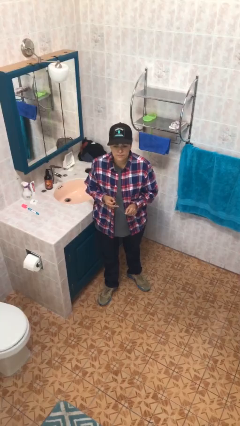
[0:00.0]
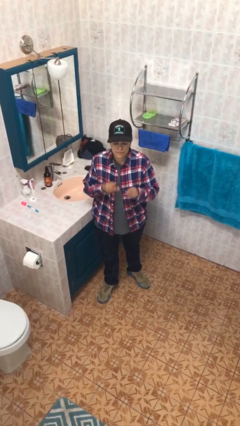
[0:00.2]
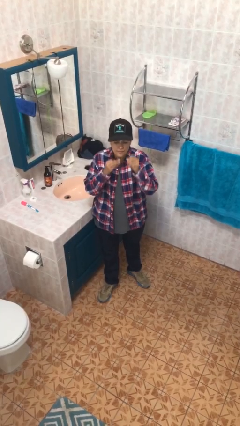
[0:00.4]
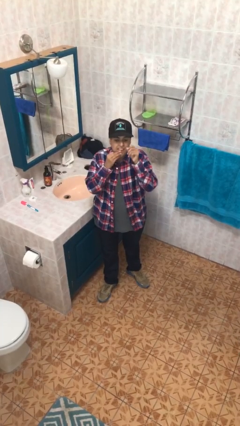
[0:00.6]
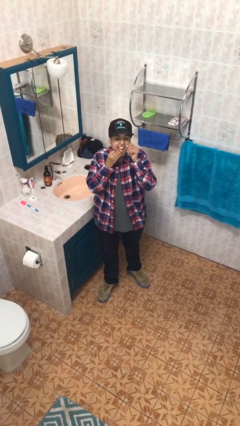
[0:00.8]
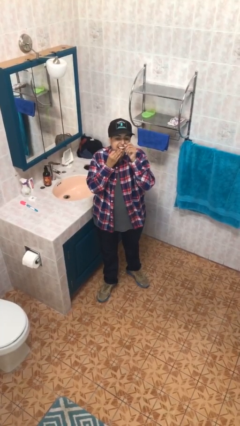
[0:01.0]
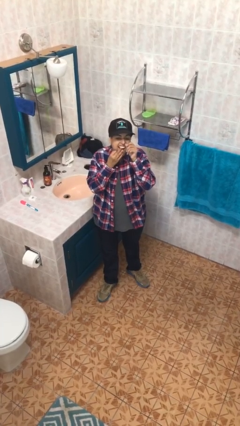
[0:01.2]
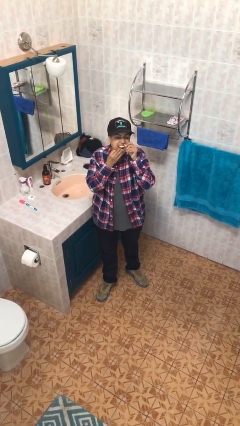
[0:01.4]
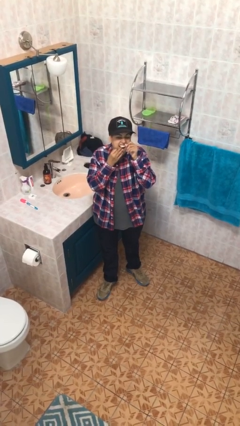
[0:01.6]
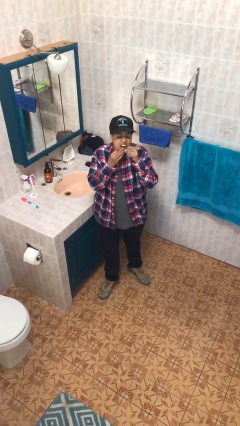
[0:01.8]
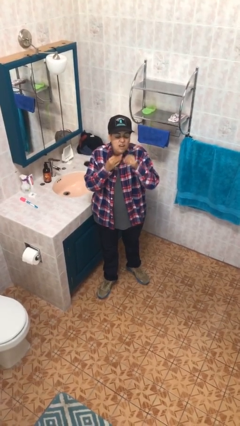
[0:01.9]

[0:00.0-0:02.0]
person flosses

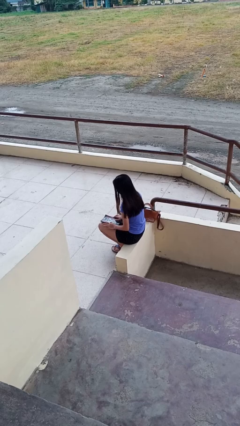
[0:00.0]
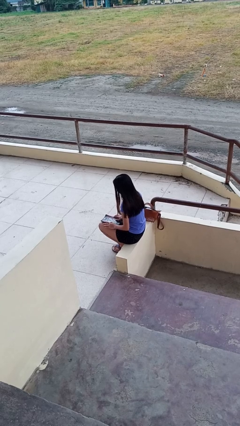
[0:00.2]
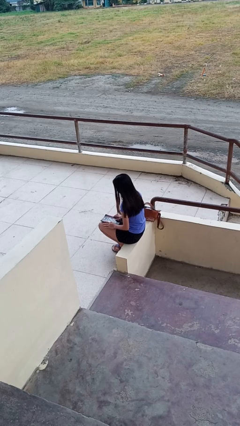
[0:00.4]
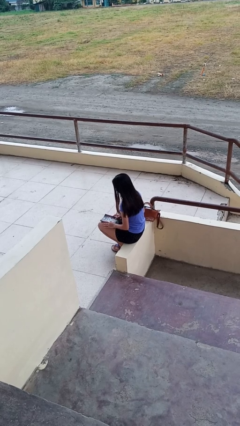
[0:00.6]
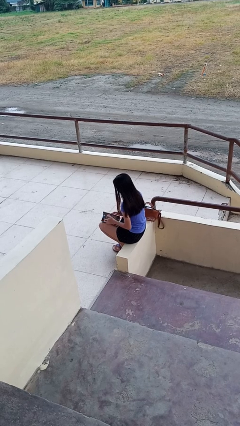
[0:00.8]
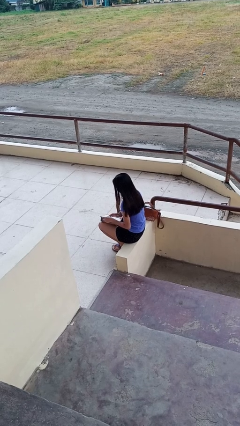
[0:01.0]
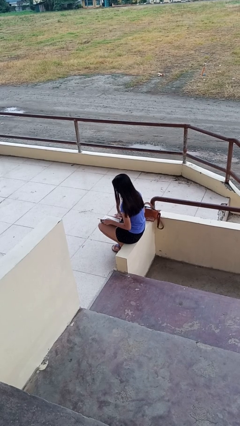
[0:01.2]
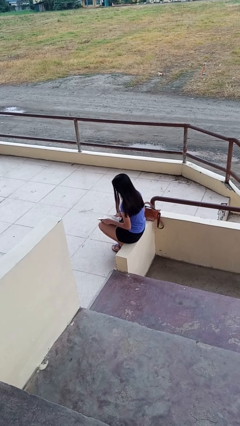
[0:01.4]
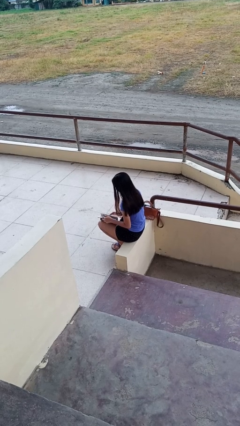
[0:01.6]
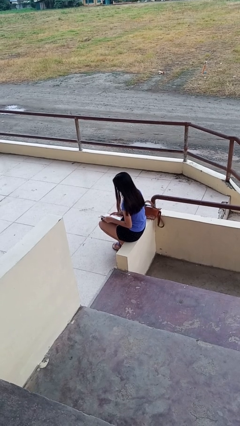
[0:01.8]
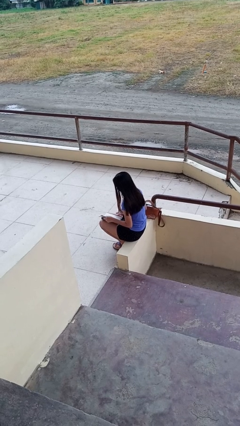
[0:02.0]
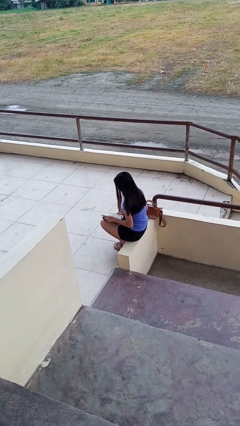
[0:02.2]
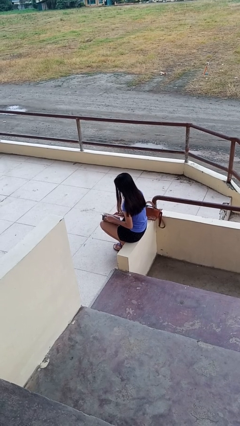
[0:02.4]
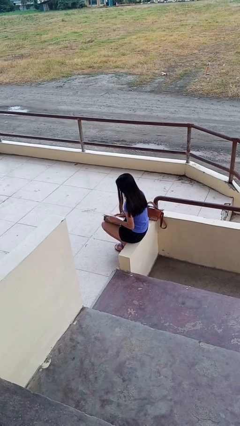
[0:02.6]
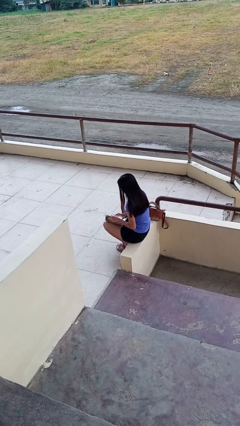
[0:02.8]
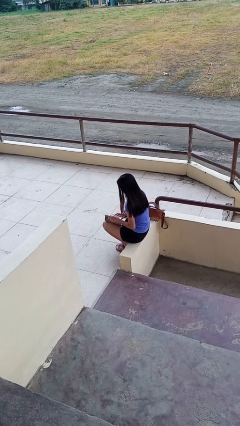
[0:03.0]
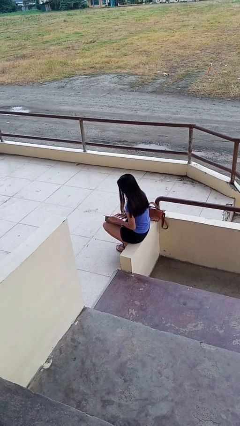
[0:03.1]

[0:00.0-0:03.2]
person reads book

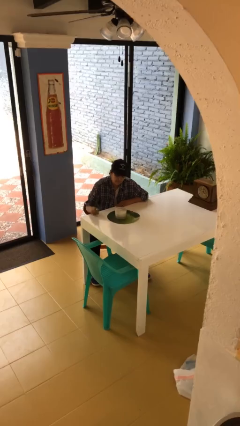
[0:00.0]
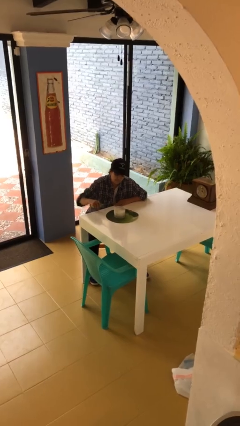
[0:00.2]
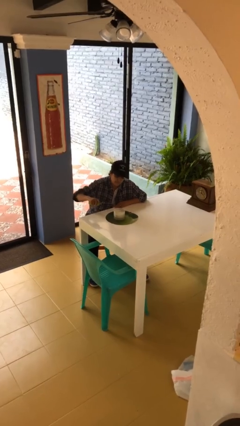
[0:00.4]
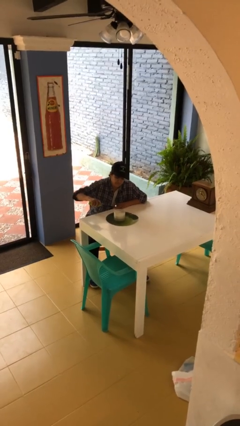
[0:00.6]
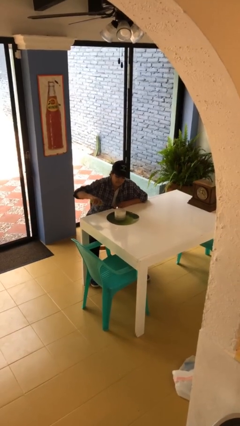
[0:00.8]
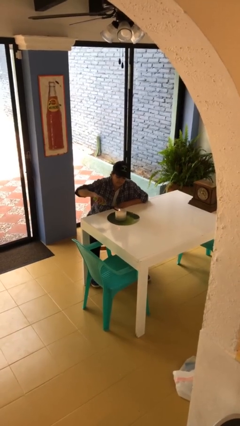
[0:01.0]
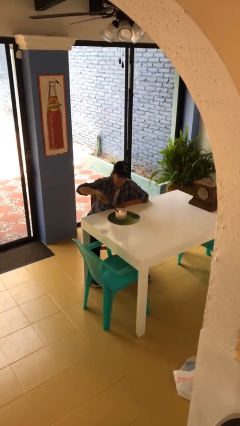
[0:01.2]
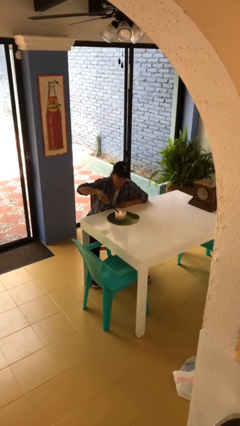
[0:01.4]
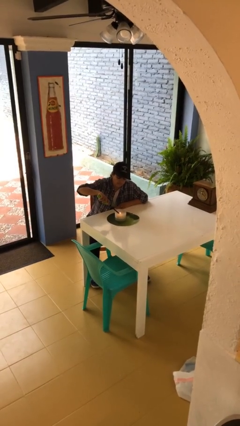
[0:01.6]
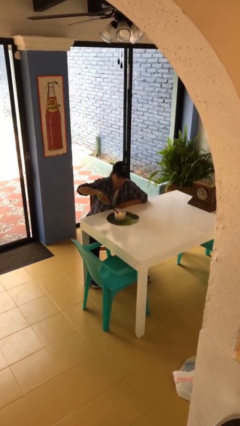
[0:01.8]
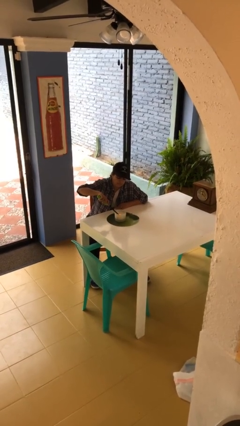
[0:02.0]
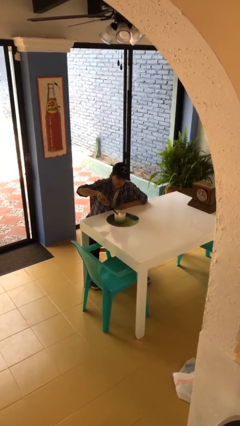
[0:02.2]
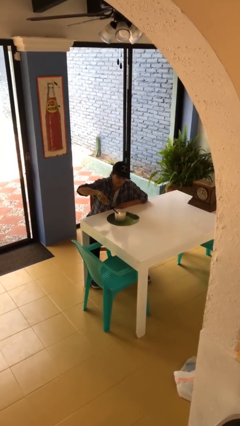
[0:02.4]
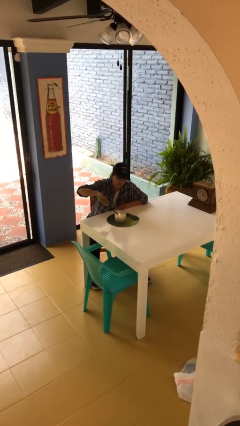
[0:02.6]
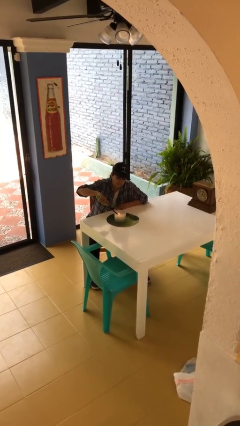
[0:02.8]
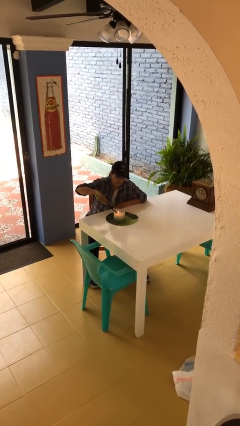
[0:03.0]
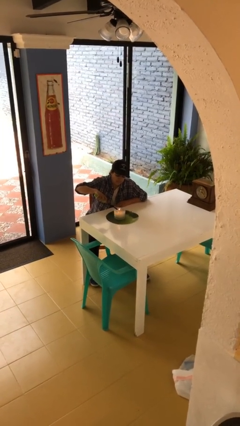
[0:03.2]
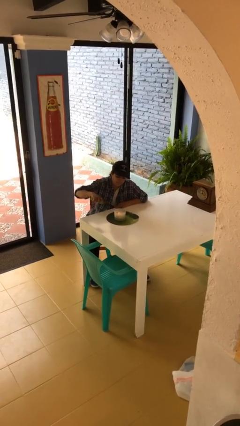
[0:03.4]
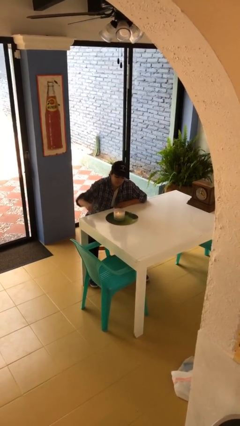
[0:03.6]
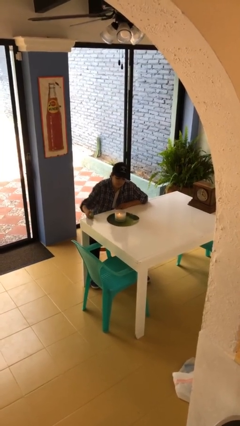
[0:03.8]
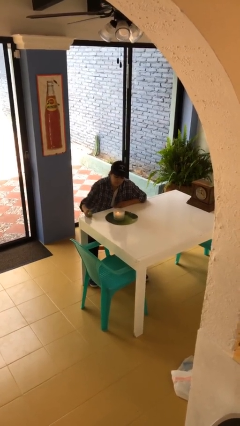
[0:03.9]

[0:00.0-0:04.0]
person lights candle

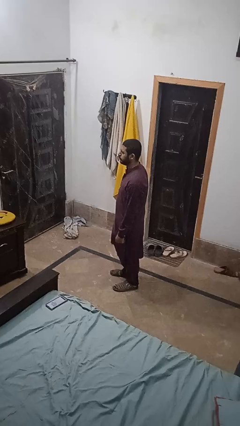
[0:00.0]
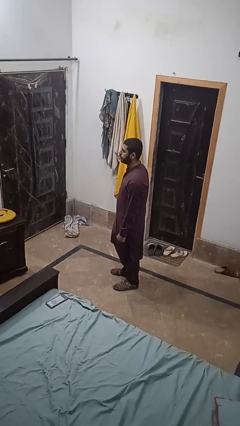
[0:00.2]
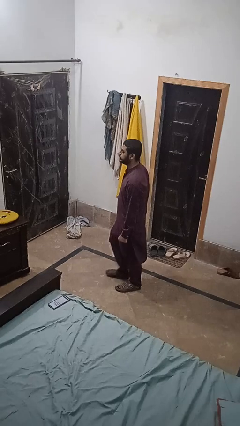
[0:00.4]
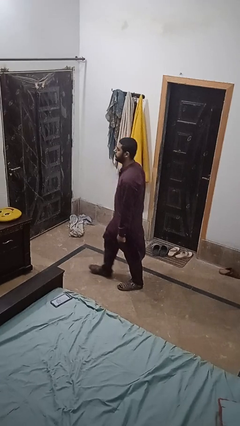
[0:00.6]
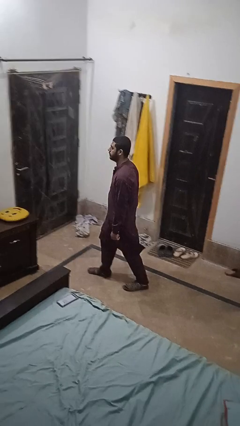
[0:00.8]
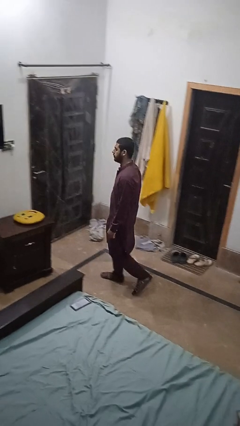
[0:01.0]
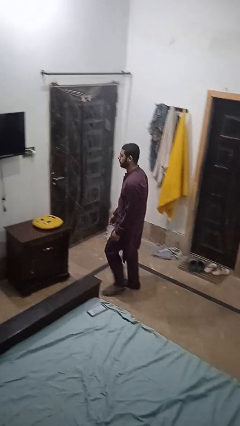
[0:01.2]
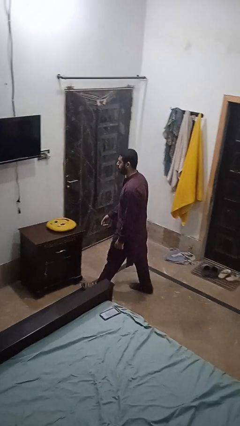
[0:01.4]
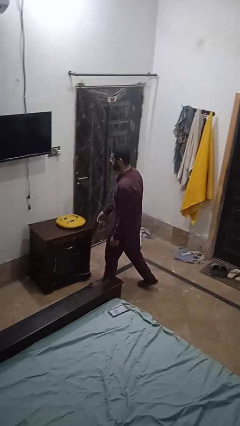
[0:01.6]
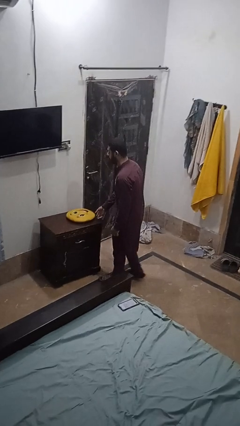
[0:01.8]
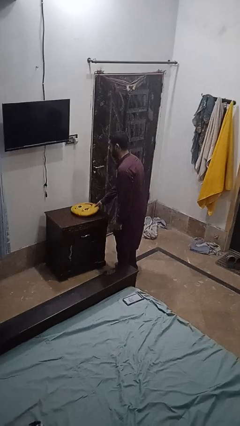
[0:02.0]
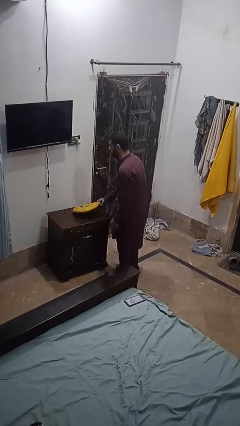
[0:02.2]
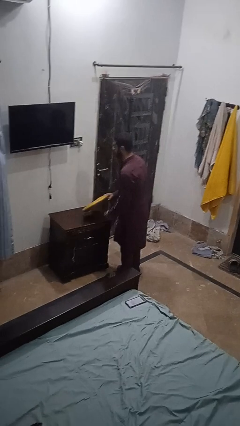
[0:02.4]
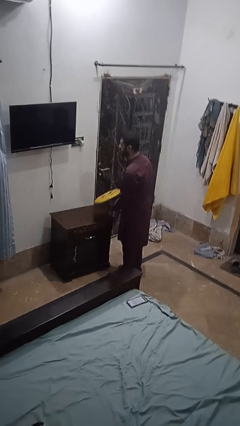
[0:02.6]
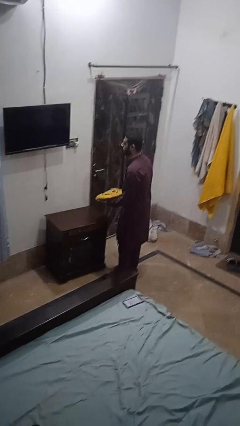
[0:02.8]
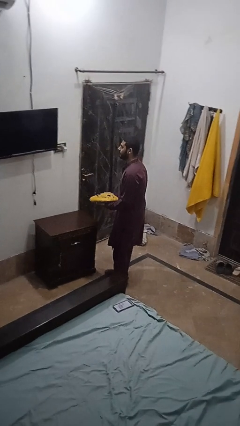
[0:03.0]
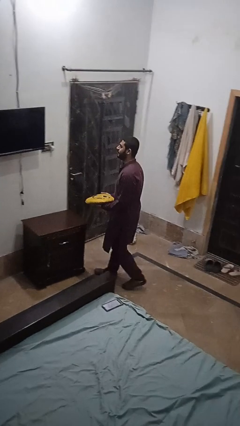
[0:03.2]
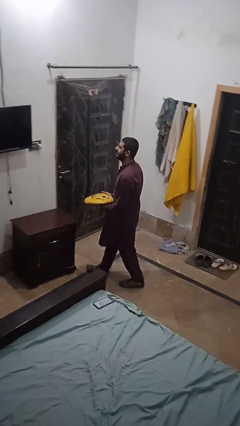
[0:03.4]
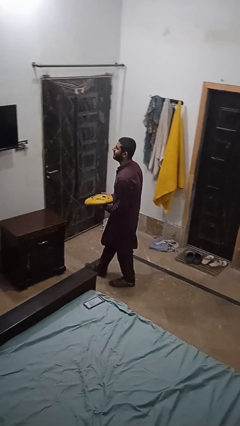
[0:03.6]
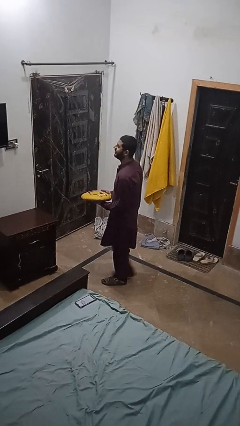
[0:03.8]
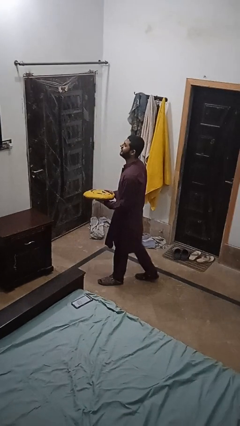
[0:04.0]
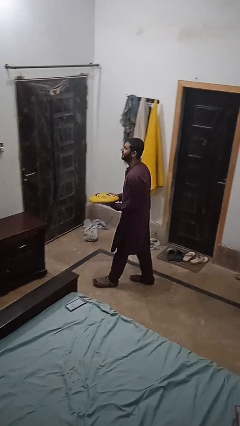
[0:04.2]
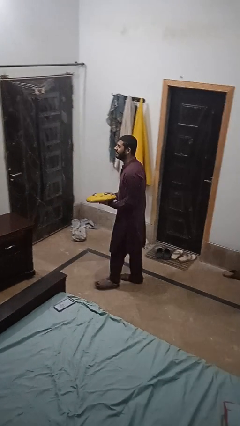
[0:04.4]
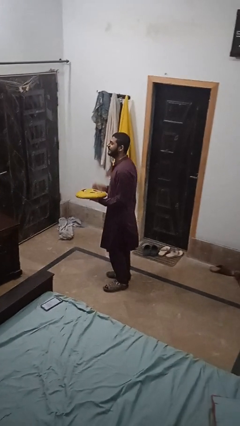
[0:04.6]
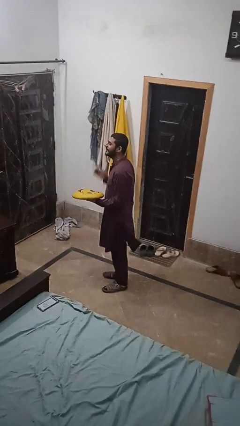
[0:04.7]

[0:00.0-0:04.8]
person picks up object from table

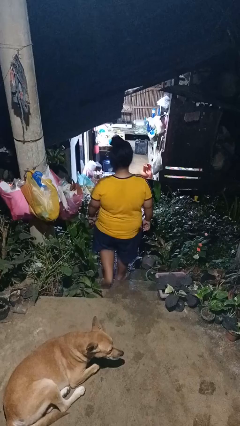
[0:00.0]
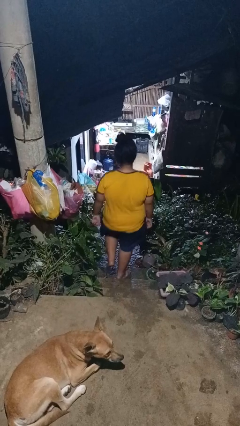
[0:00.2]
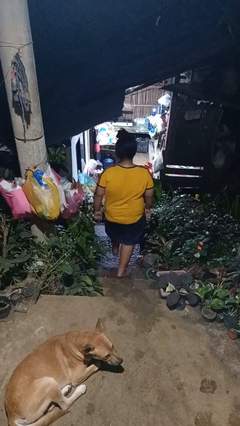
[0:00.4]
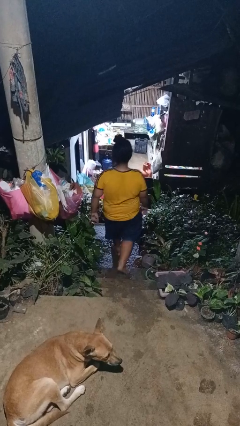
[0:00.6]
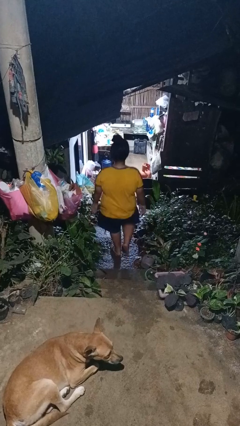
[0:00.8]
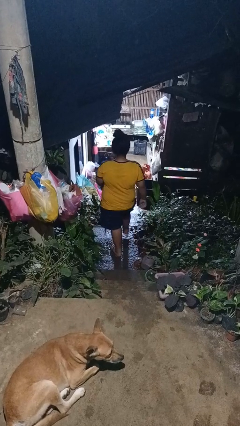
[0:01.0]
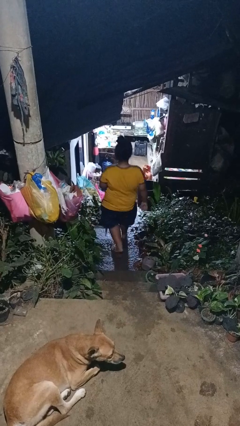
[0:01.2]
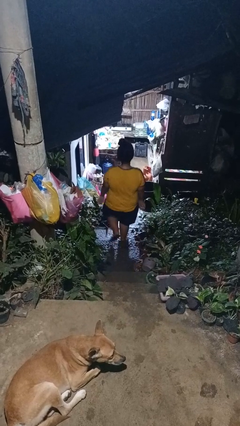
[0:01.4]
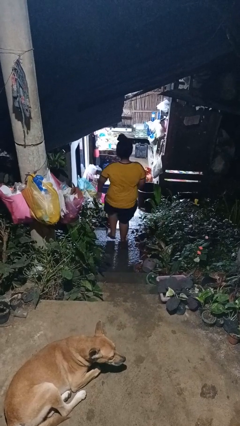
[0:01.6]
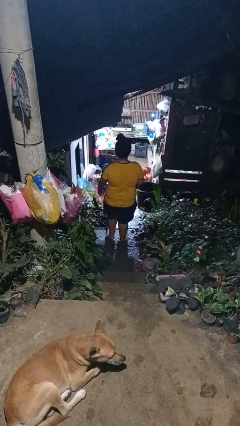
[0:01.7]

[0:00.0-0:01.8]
person climbs down stairs

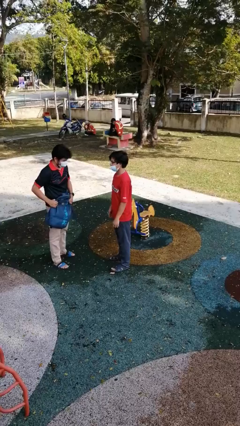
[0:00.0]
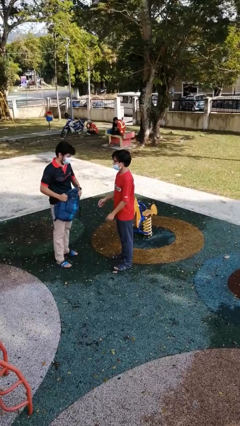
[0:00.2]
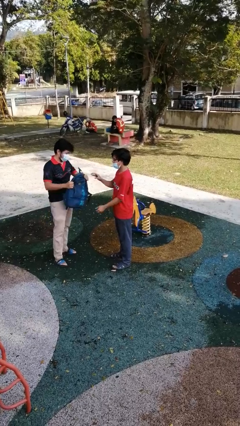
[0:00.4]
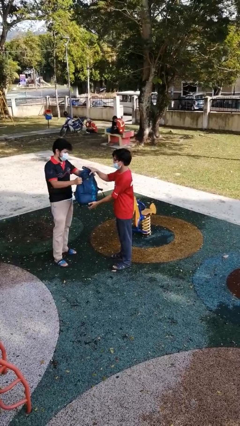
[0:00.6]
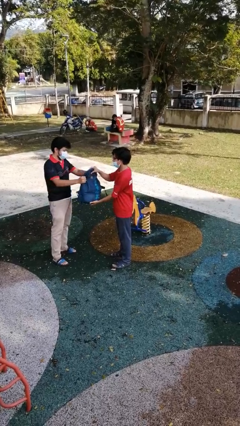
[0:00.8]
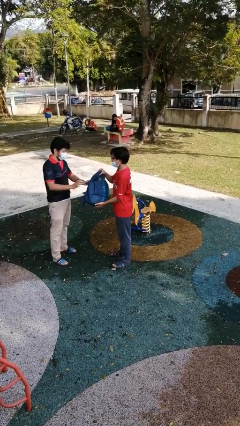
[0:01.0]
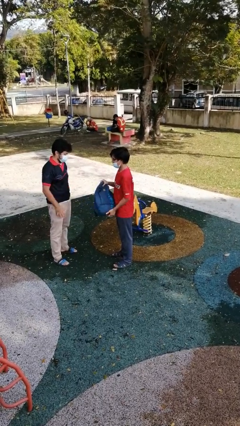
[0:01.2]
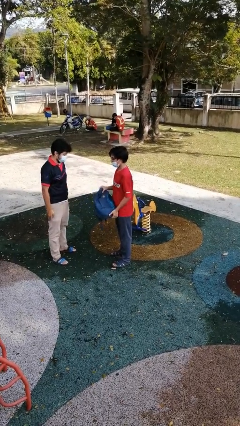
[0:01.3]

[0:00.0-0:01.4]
person transfers object to person

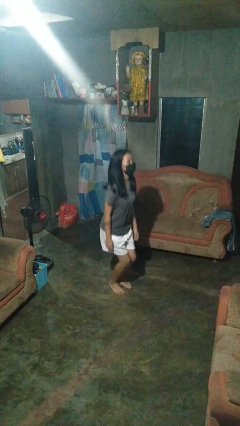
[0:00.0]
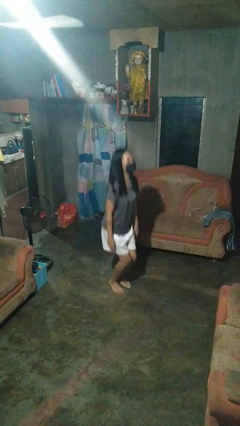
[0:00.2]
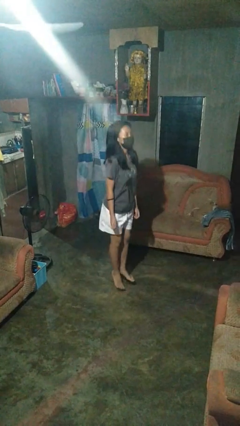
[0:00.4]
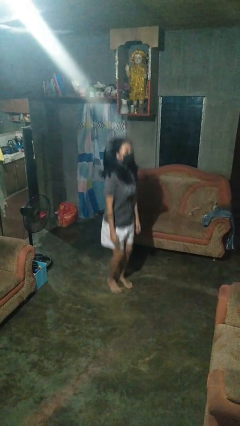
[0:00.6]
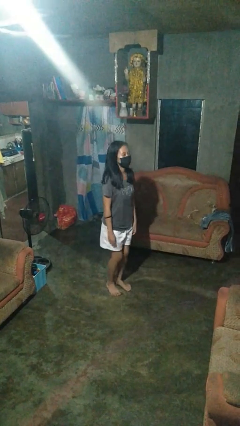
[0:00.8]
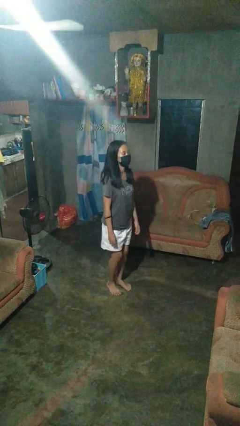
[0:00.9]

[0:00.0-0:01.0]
person jumps
